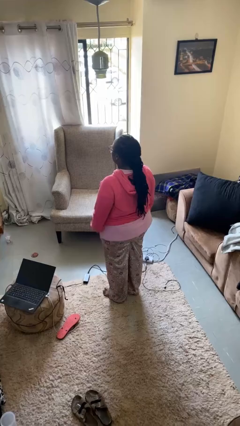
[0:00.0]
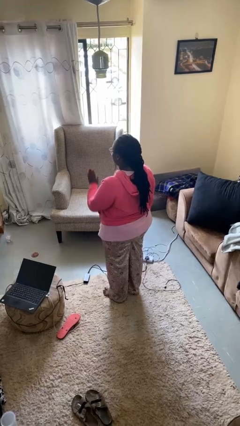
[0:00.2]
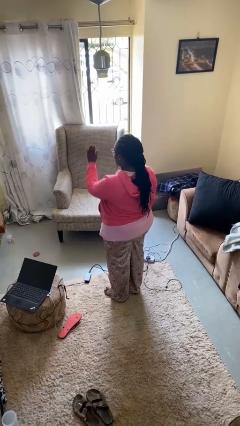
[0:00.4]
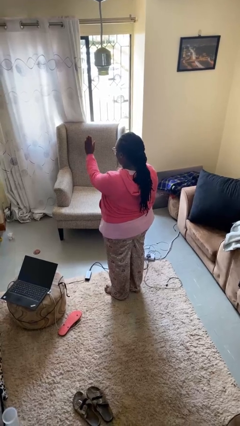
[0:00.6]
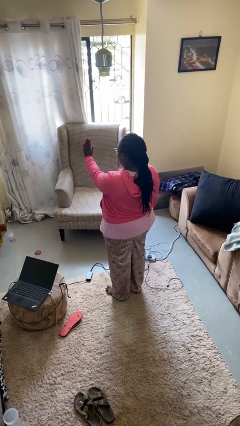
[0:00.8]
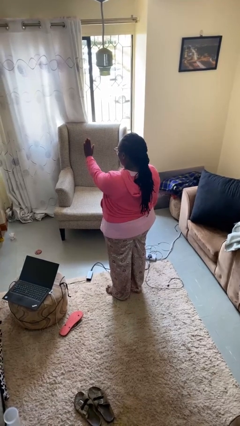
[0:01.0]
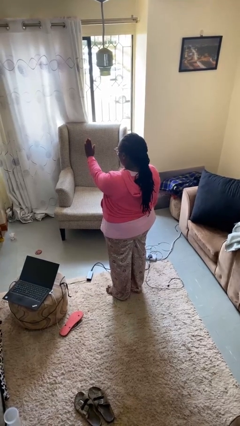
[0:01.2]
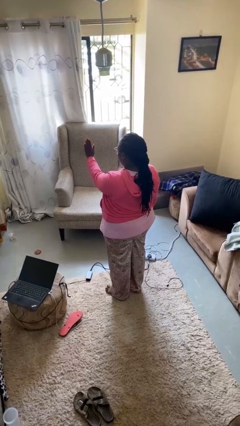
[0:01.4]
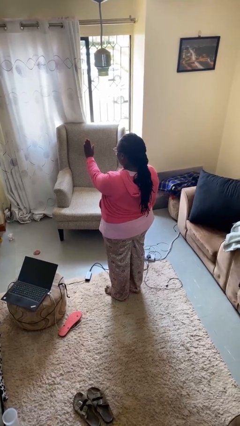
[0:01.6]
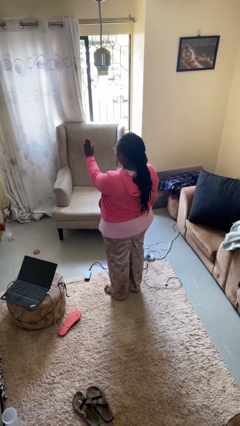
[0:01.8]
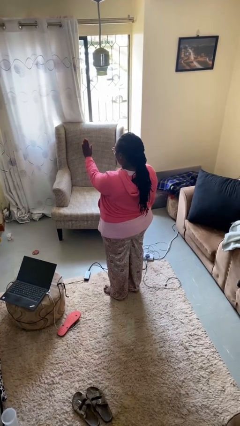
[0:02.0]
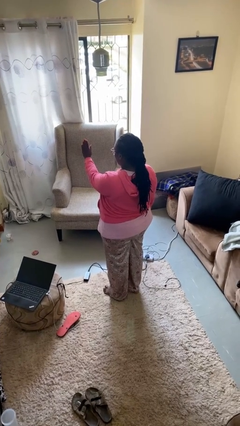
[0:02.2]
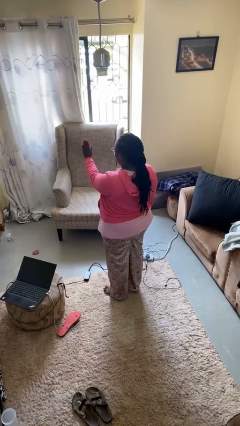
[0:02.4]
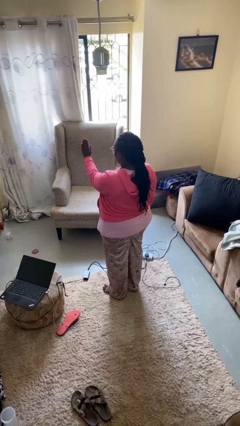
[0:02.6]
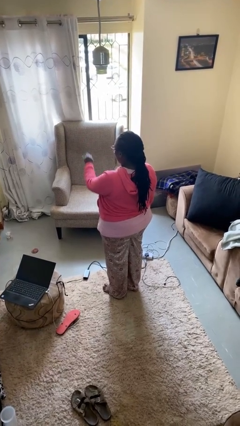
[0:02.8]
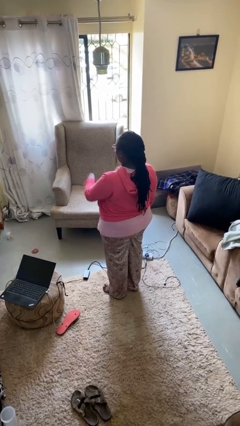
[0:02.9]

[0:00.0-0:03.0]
person gestures stop

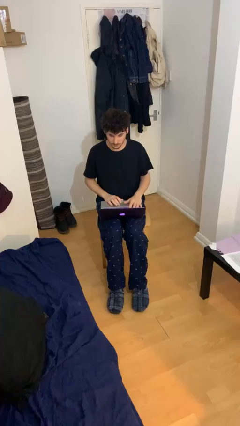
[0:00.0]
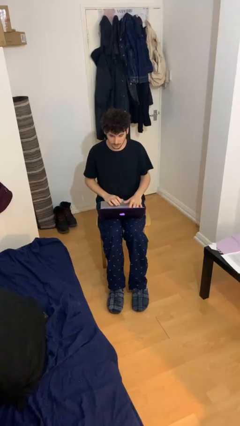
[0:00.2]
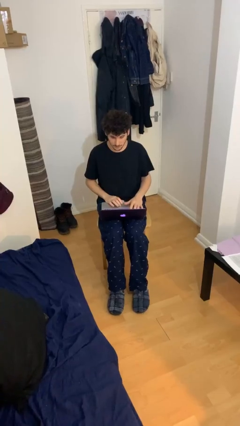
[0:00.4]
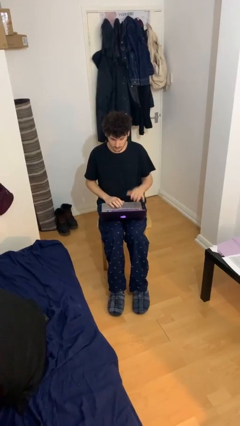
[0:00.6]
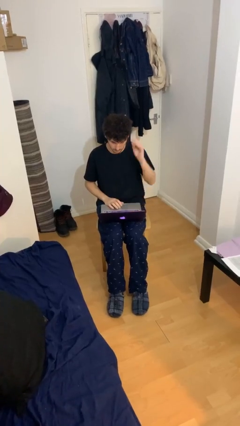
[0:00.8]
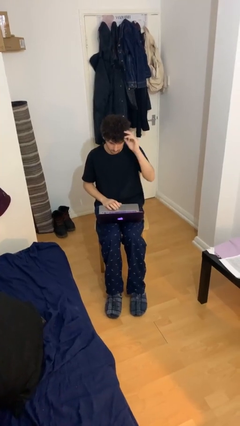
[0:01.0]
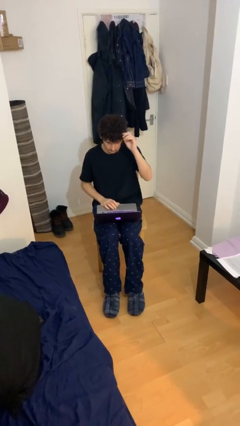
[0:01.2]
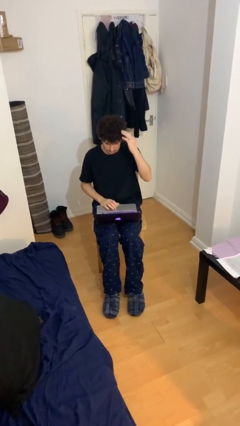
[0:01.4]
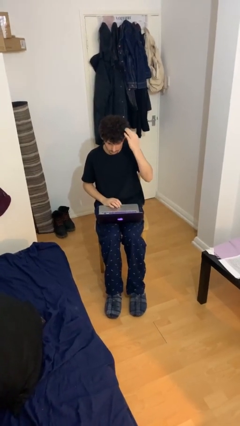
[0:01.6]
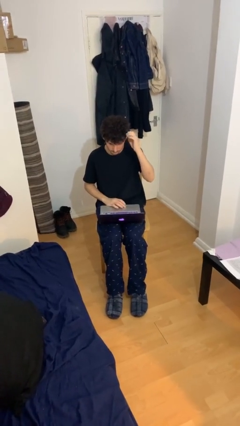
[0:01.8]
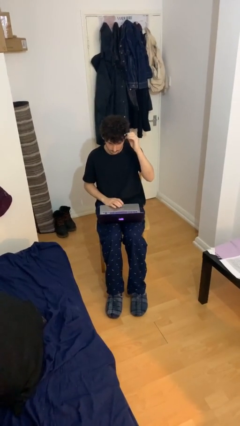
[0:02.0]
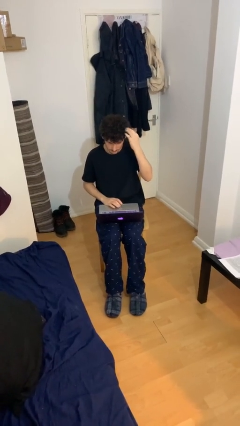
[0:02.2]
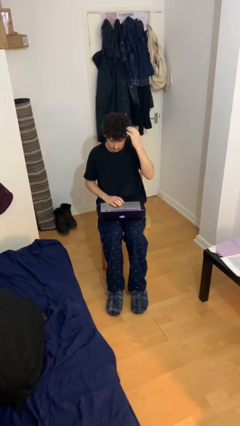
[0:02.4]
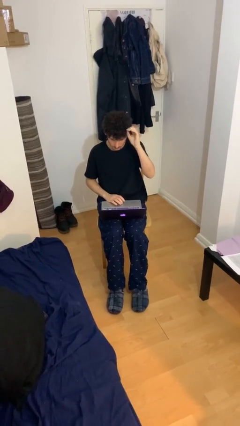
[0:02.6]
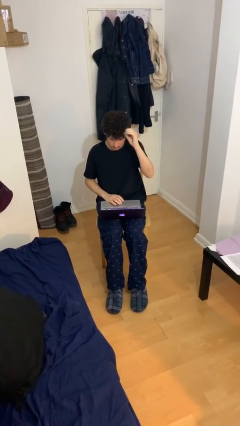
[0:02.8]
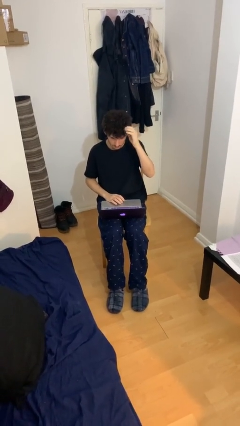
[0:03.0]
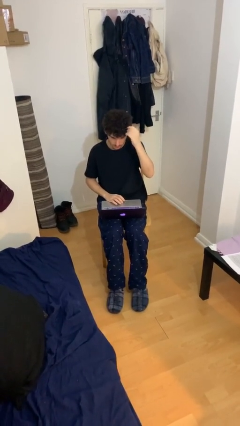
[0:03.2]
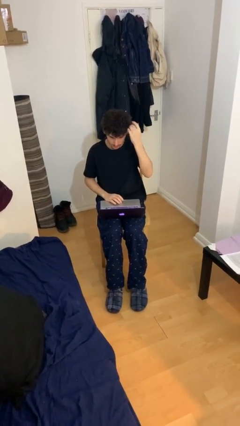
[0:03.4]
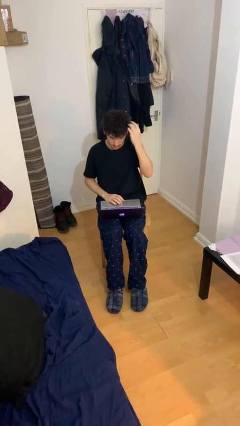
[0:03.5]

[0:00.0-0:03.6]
person interacts with laptop

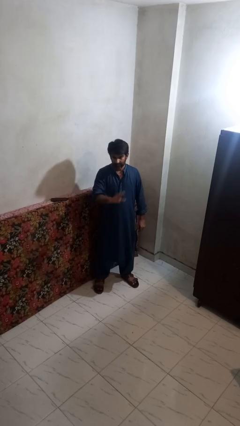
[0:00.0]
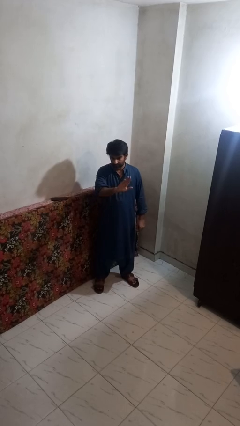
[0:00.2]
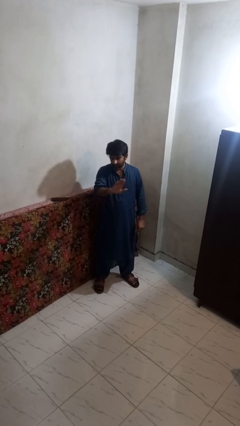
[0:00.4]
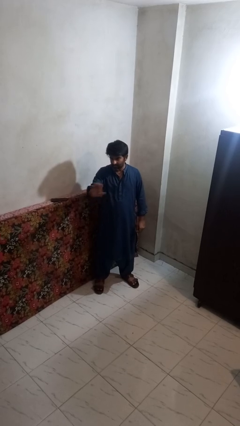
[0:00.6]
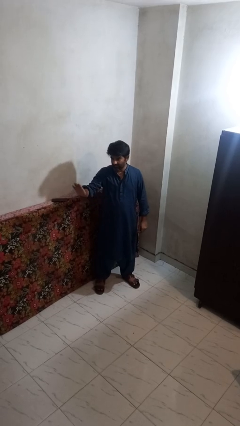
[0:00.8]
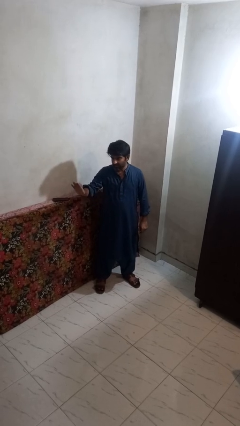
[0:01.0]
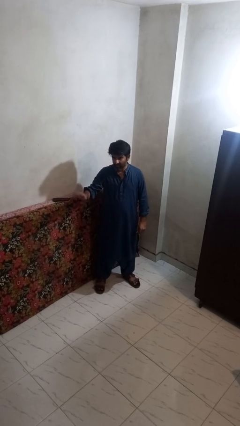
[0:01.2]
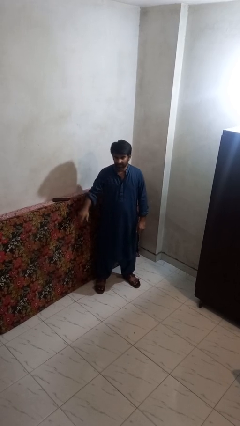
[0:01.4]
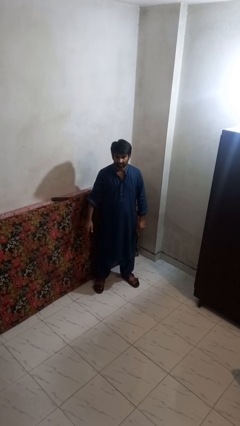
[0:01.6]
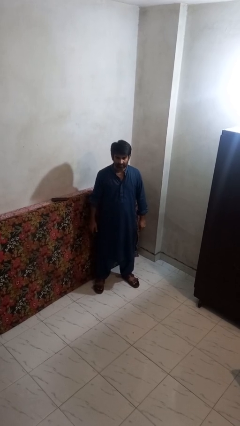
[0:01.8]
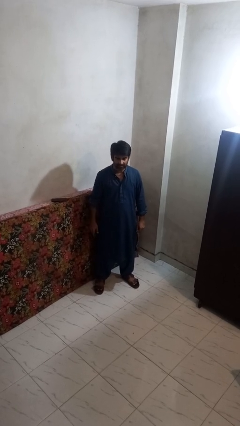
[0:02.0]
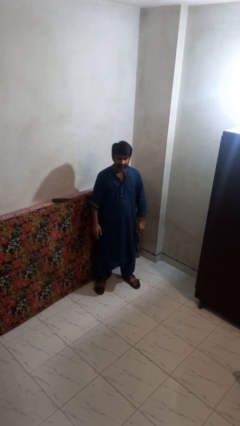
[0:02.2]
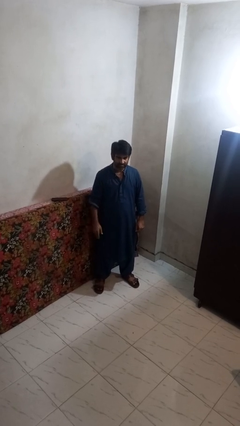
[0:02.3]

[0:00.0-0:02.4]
person gestures swipe right

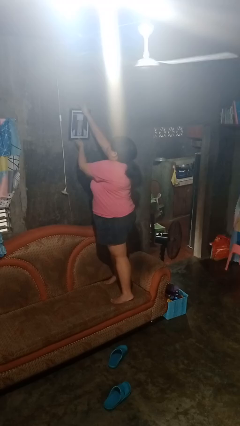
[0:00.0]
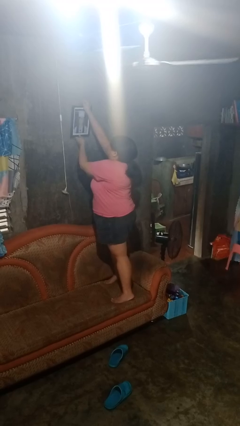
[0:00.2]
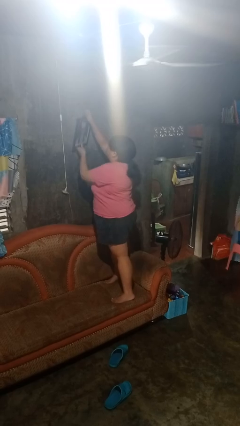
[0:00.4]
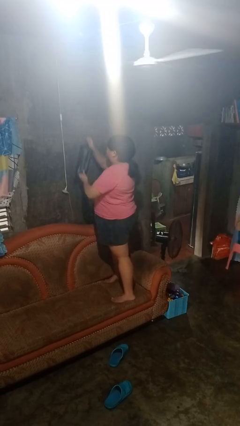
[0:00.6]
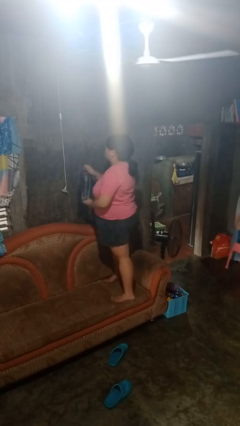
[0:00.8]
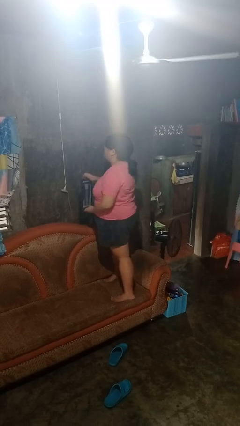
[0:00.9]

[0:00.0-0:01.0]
person takes down picture frame

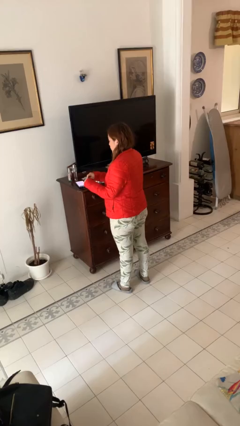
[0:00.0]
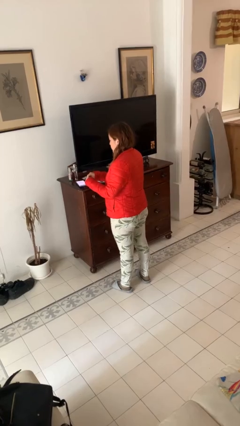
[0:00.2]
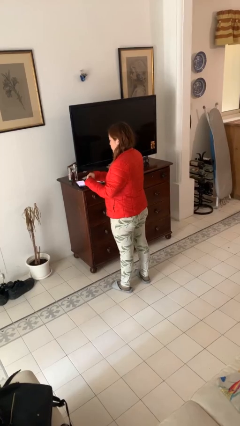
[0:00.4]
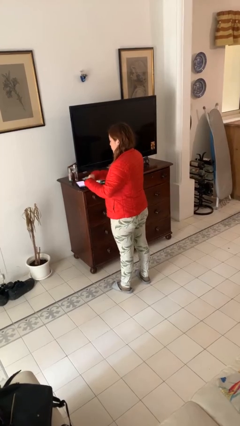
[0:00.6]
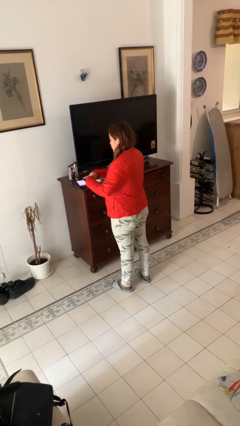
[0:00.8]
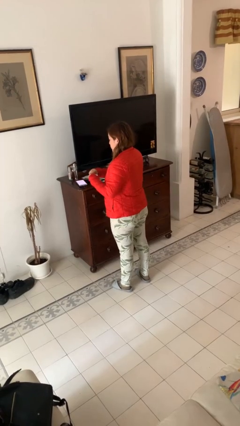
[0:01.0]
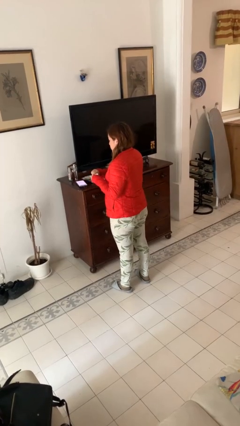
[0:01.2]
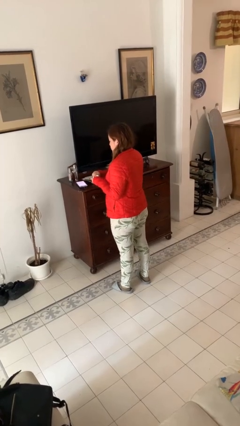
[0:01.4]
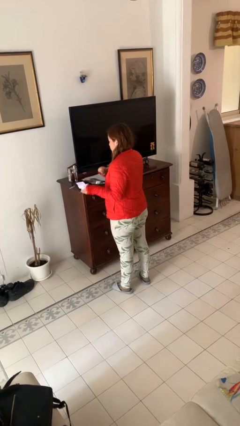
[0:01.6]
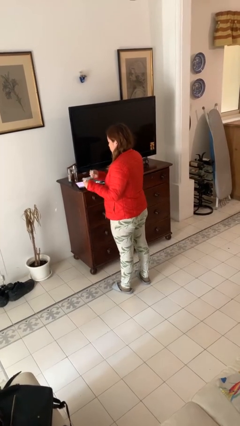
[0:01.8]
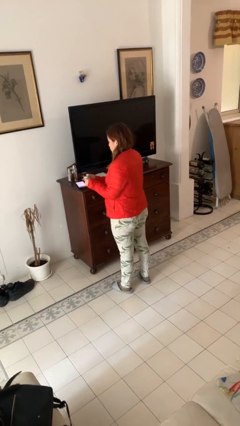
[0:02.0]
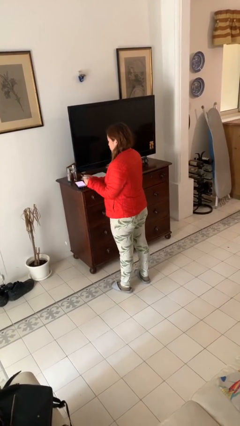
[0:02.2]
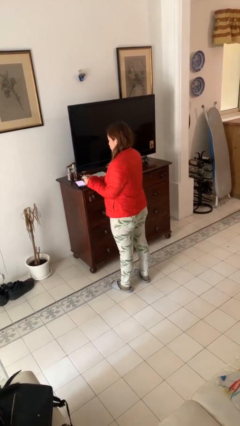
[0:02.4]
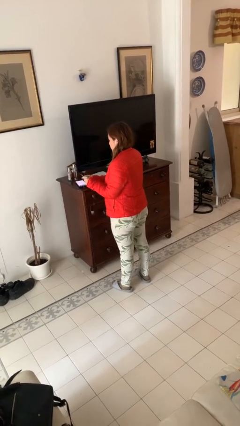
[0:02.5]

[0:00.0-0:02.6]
person tears paper

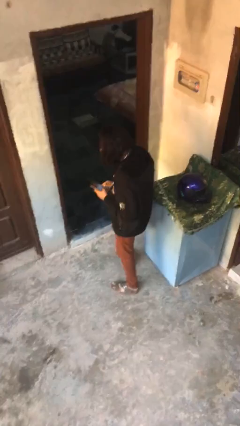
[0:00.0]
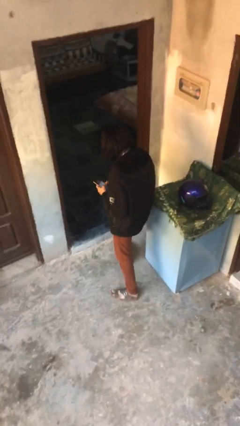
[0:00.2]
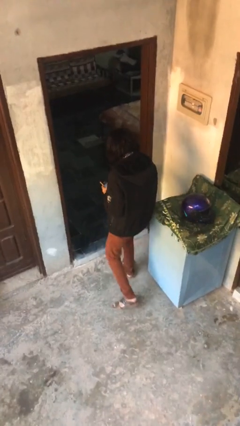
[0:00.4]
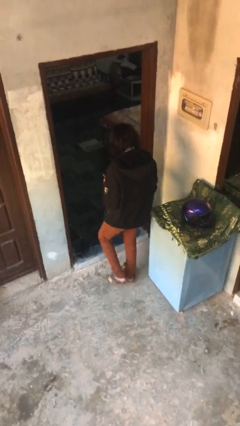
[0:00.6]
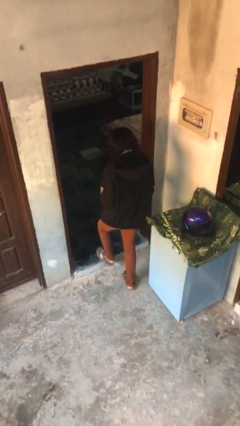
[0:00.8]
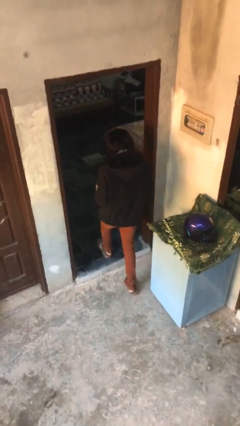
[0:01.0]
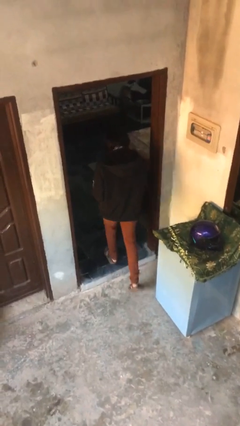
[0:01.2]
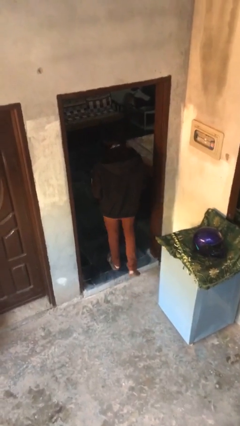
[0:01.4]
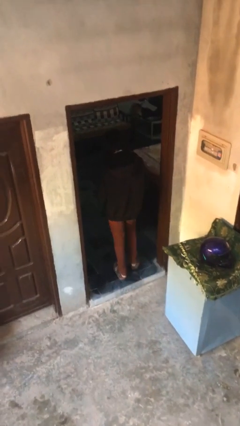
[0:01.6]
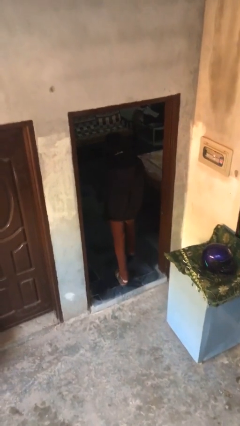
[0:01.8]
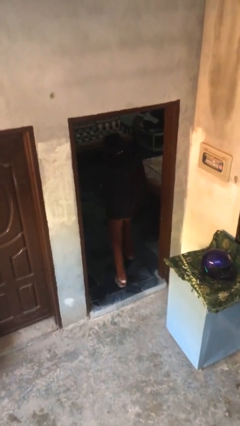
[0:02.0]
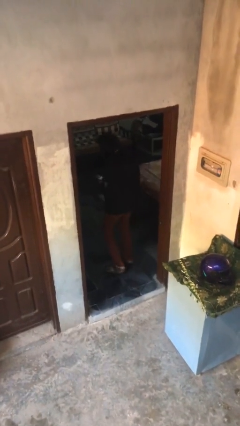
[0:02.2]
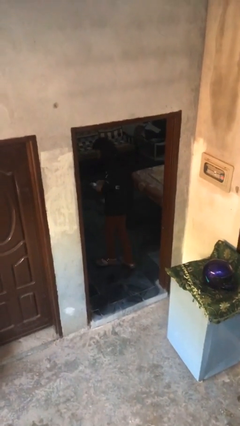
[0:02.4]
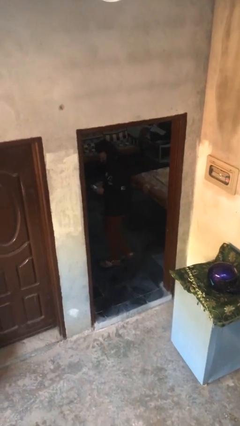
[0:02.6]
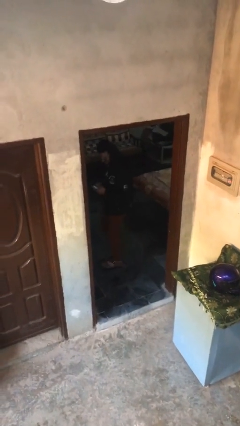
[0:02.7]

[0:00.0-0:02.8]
person enters scene through structure

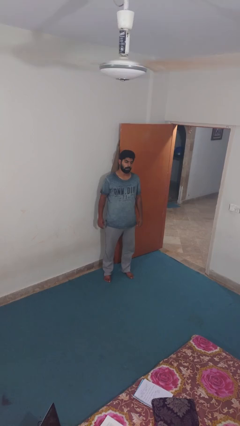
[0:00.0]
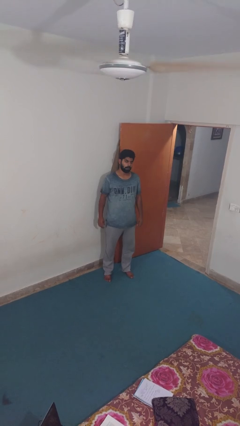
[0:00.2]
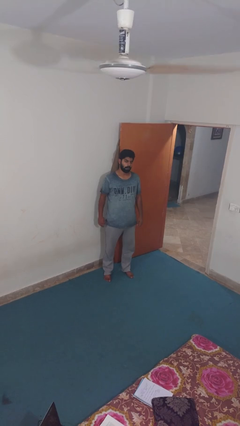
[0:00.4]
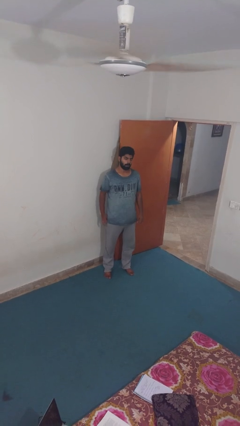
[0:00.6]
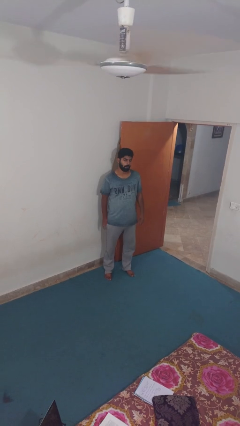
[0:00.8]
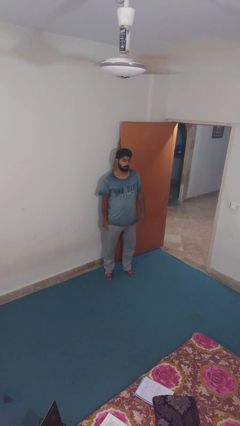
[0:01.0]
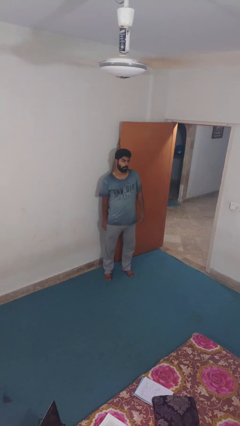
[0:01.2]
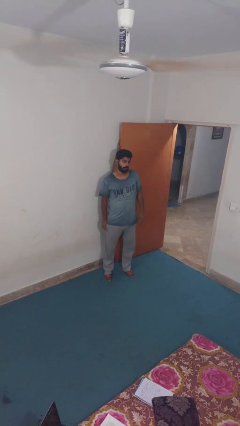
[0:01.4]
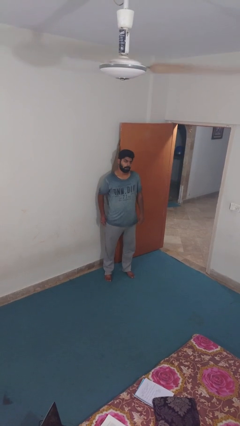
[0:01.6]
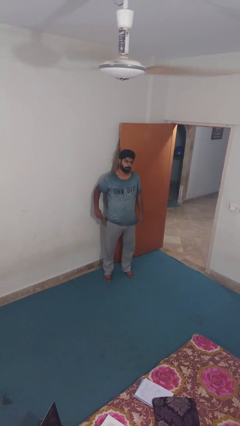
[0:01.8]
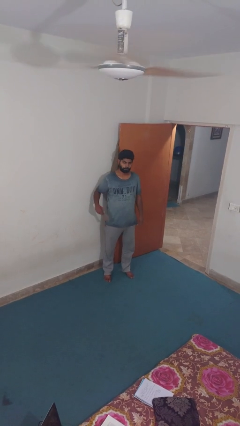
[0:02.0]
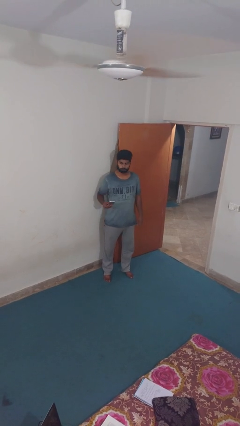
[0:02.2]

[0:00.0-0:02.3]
person takes phone from pocket
